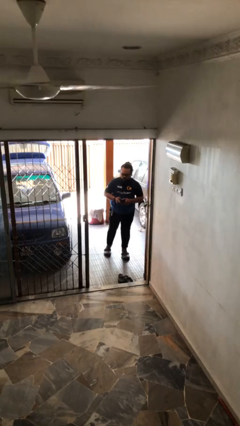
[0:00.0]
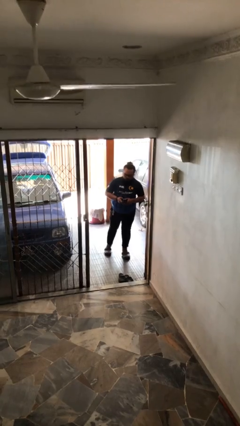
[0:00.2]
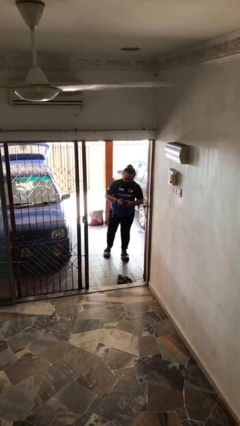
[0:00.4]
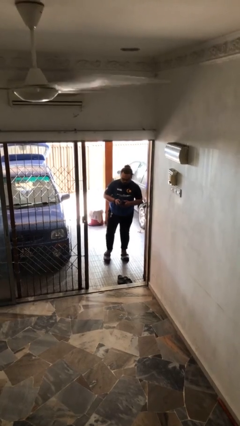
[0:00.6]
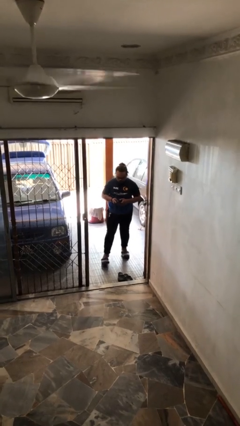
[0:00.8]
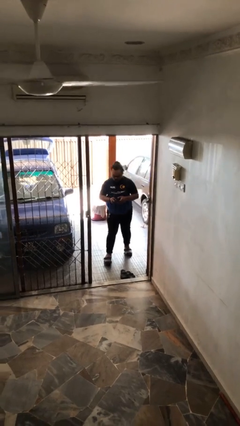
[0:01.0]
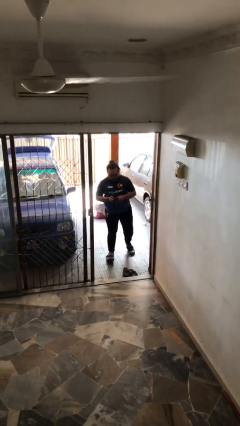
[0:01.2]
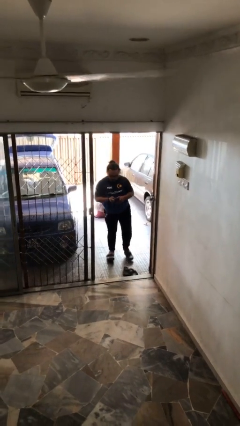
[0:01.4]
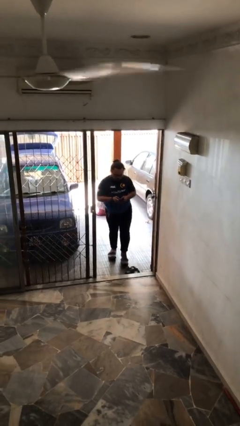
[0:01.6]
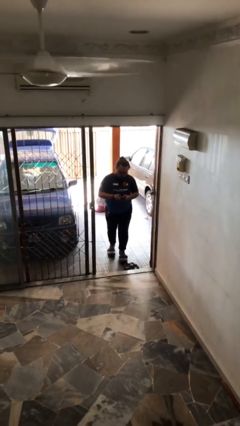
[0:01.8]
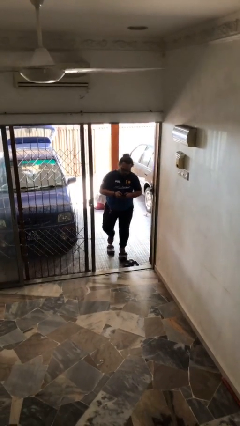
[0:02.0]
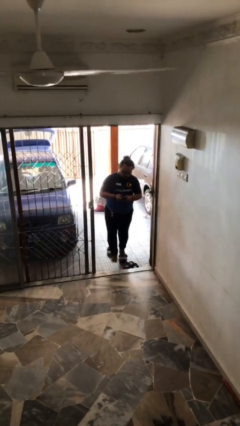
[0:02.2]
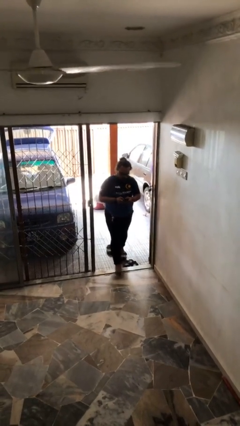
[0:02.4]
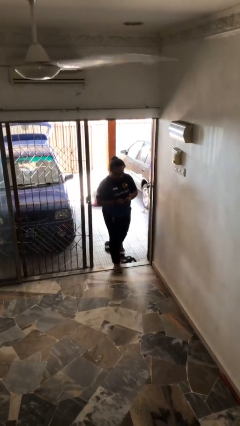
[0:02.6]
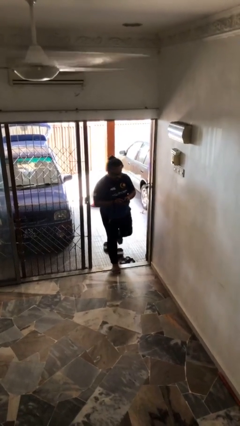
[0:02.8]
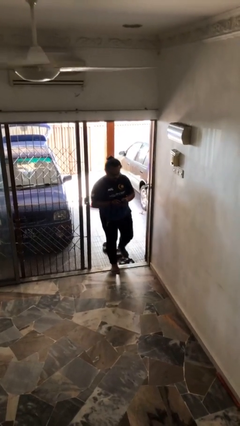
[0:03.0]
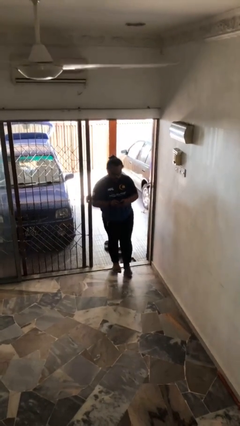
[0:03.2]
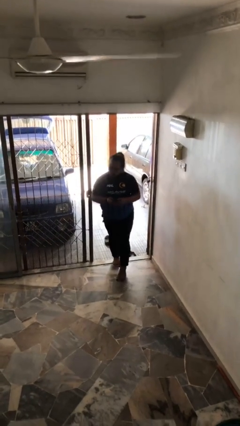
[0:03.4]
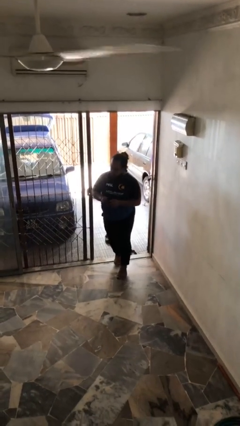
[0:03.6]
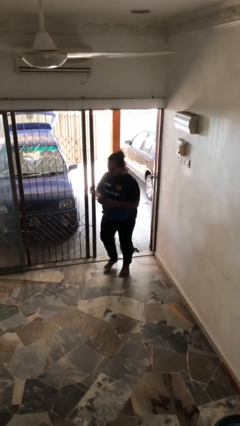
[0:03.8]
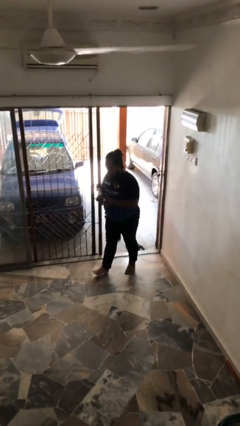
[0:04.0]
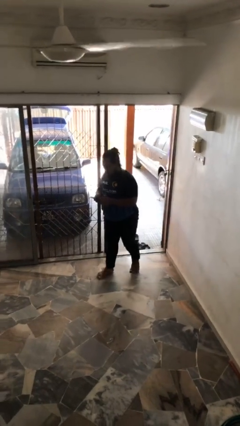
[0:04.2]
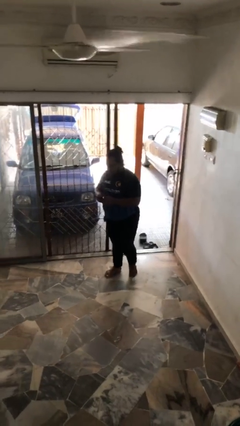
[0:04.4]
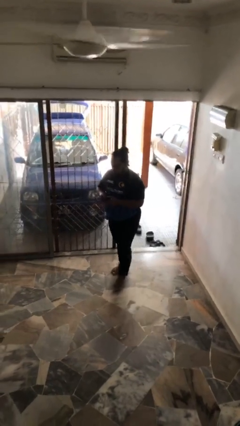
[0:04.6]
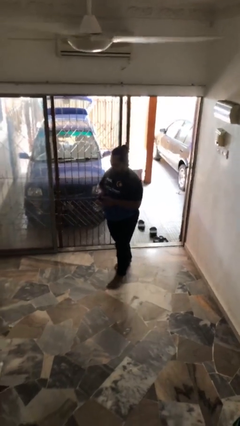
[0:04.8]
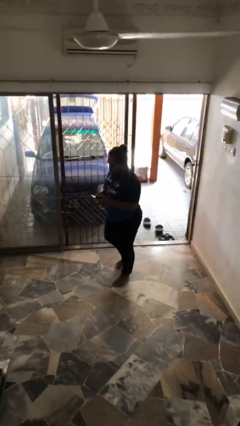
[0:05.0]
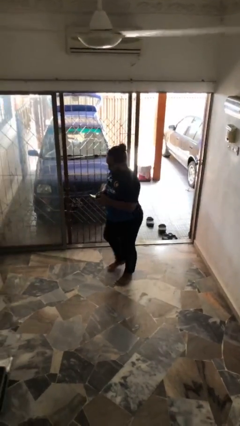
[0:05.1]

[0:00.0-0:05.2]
person texts on phone

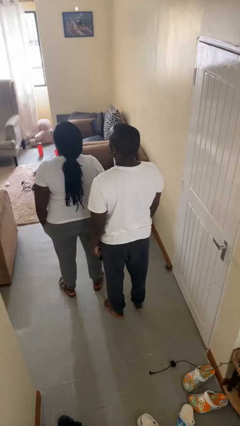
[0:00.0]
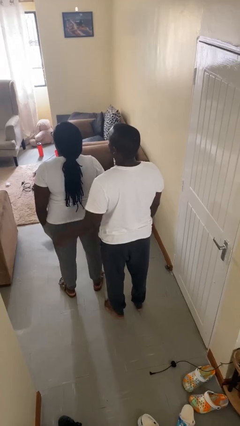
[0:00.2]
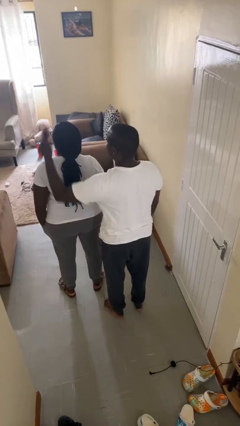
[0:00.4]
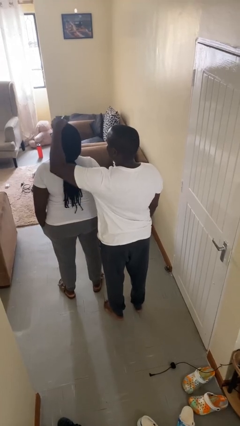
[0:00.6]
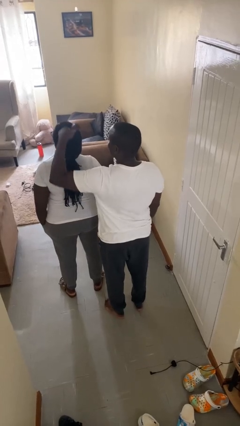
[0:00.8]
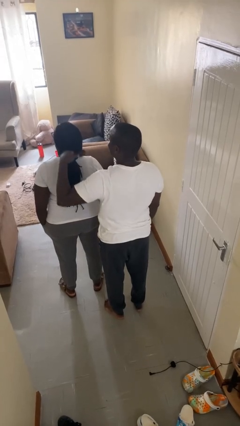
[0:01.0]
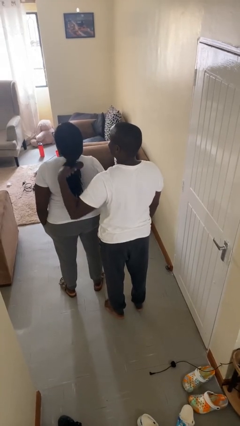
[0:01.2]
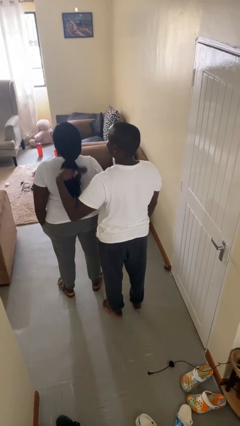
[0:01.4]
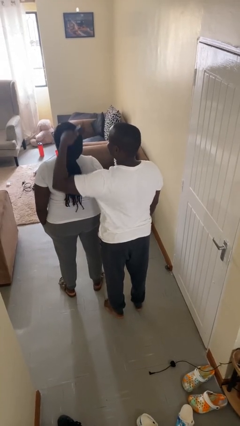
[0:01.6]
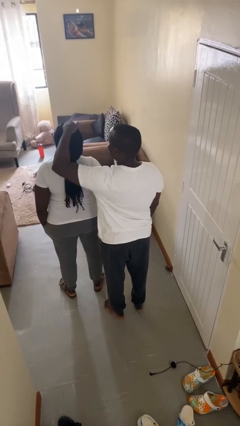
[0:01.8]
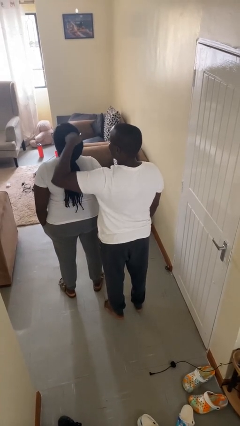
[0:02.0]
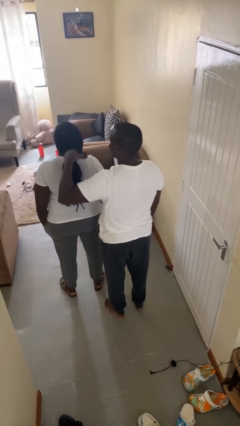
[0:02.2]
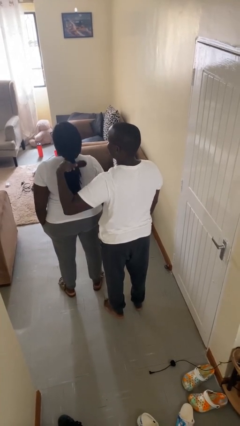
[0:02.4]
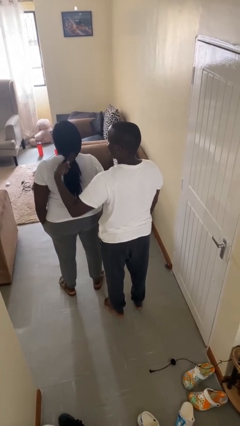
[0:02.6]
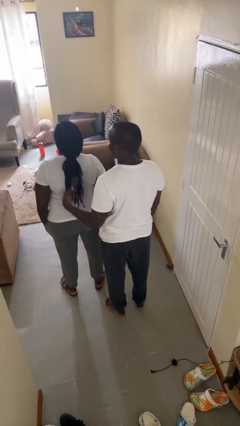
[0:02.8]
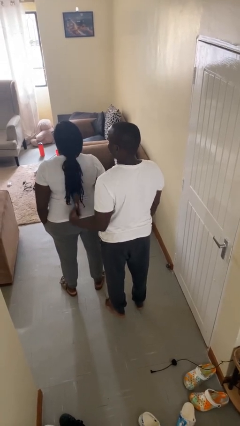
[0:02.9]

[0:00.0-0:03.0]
person brushes hair of person

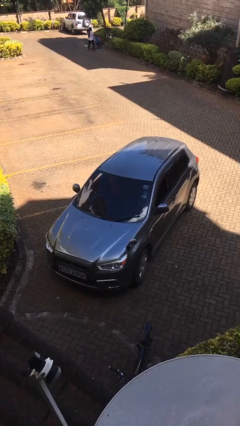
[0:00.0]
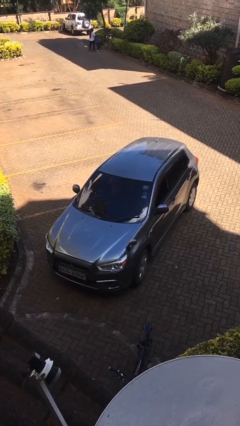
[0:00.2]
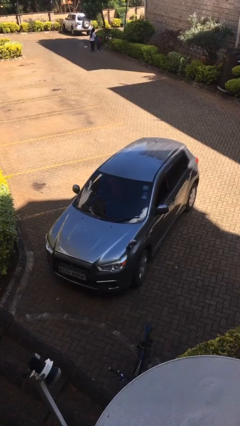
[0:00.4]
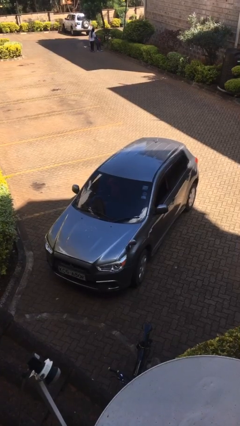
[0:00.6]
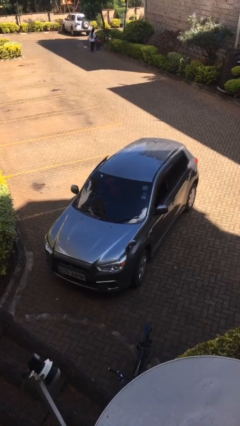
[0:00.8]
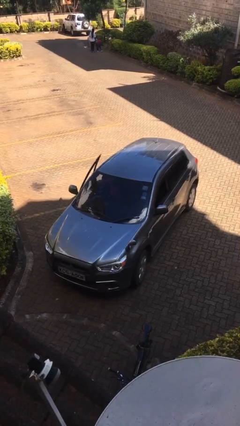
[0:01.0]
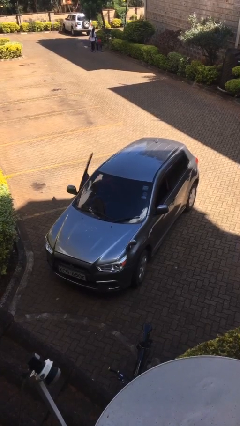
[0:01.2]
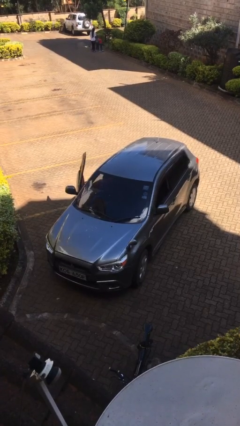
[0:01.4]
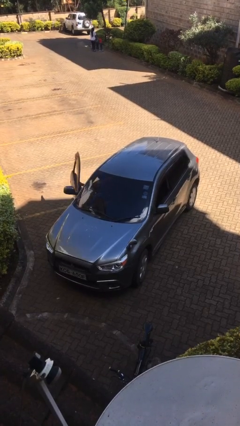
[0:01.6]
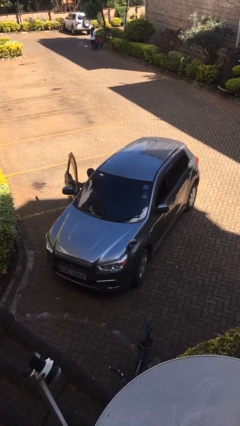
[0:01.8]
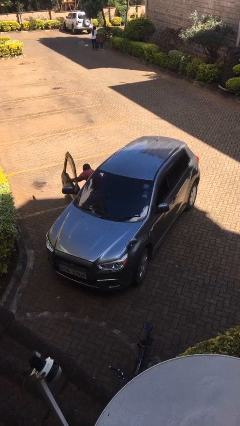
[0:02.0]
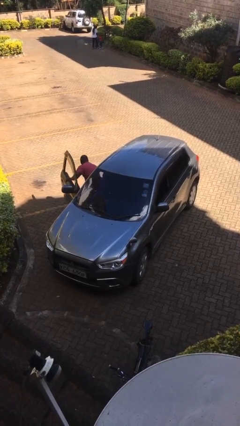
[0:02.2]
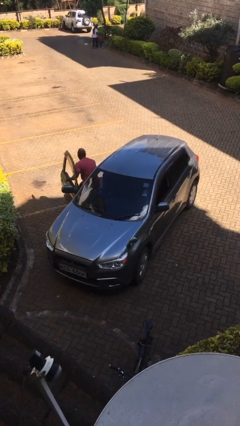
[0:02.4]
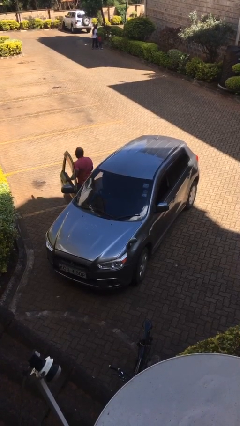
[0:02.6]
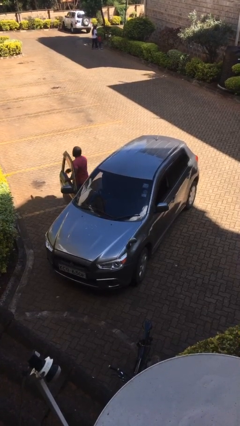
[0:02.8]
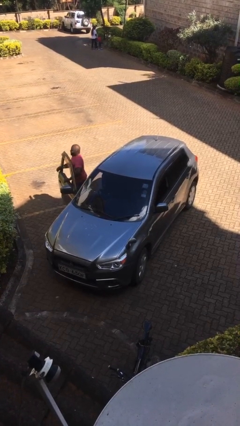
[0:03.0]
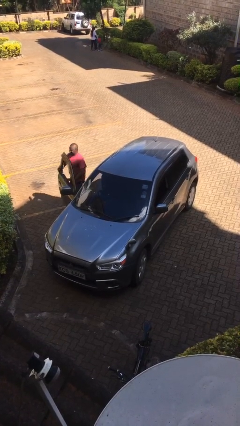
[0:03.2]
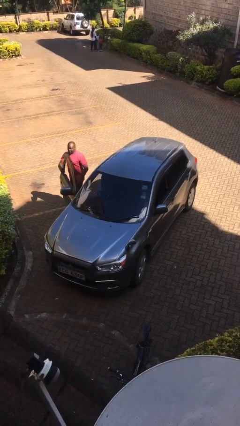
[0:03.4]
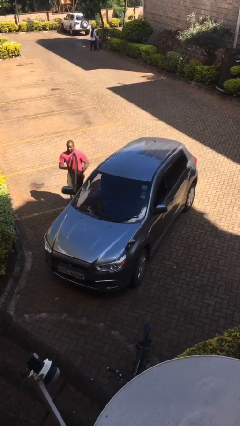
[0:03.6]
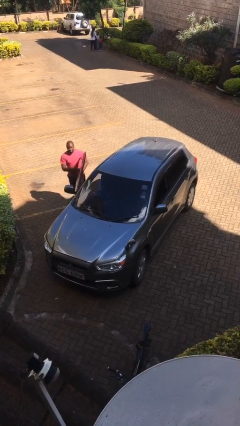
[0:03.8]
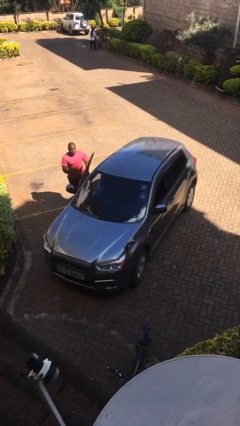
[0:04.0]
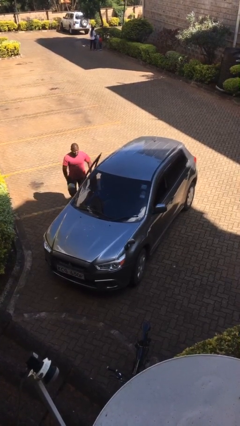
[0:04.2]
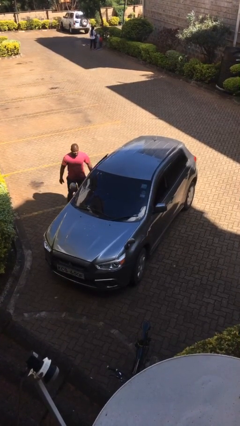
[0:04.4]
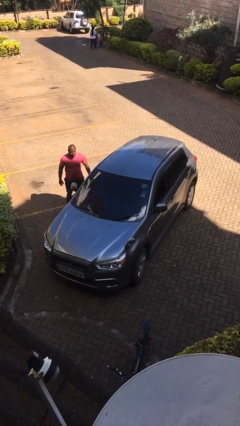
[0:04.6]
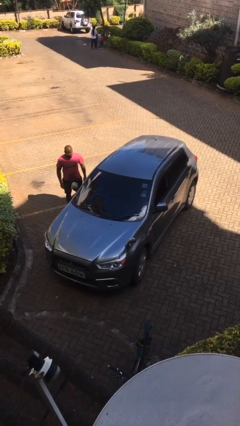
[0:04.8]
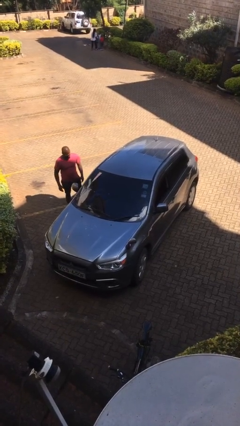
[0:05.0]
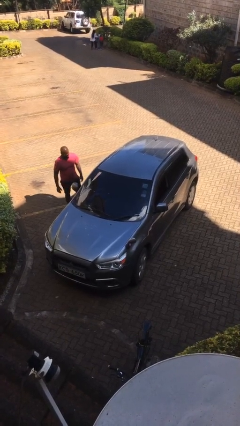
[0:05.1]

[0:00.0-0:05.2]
car drops off person

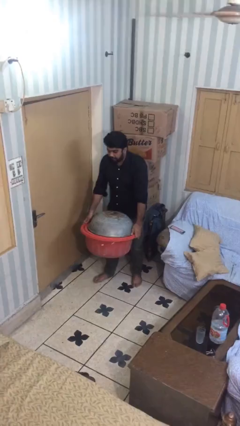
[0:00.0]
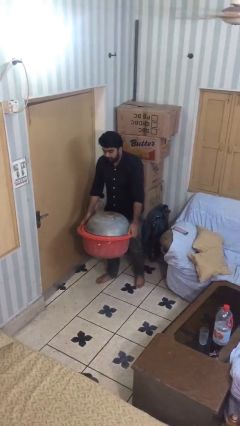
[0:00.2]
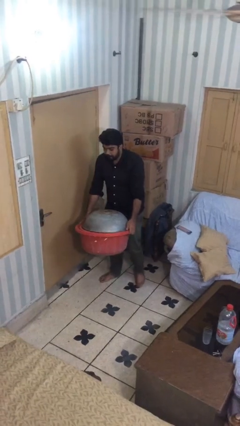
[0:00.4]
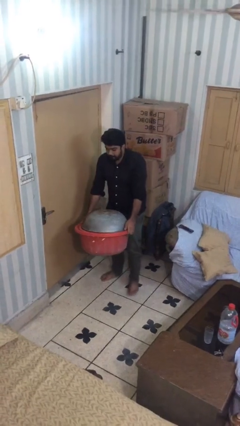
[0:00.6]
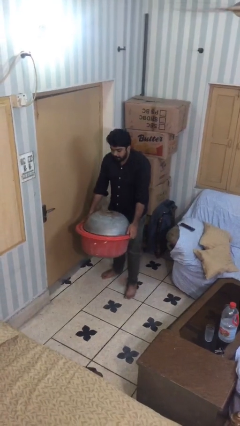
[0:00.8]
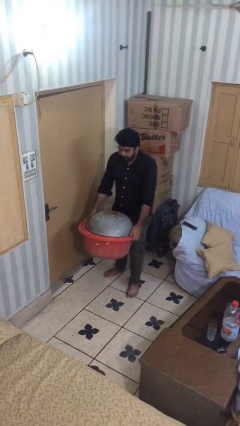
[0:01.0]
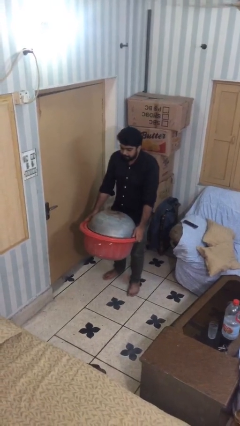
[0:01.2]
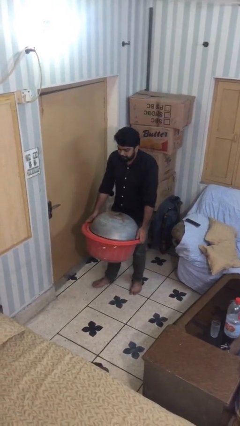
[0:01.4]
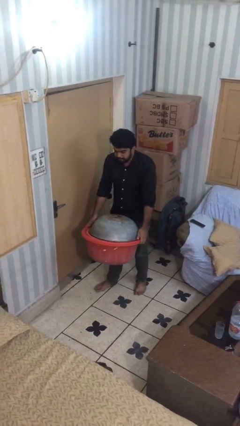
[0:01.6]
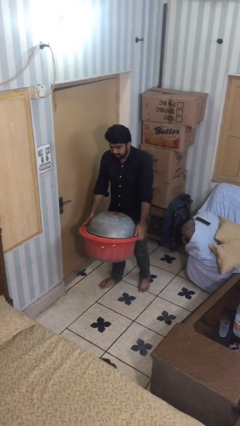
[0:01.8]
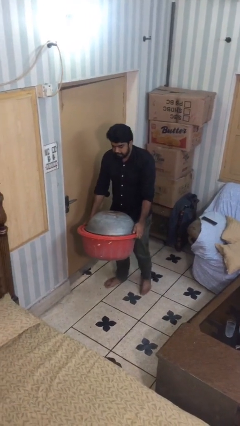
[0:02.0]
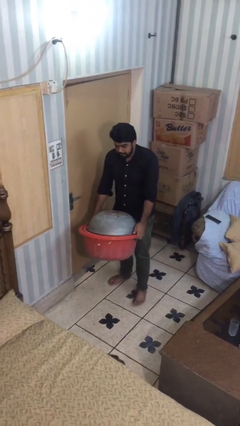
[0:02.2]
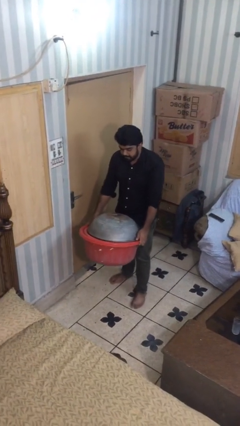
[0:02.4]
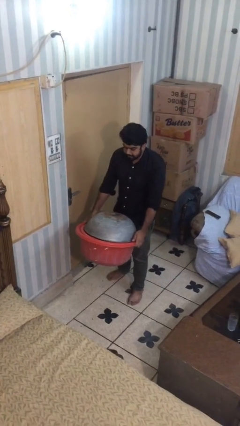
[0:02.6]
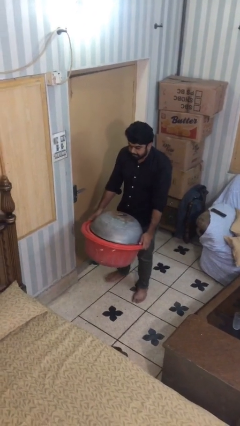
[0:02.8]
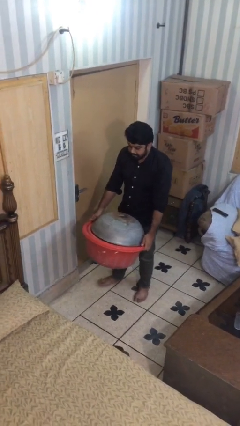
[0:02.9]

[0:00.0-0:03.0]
person carries heavy object

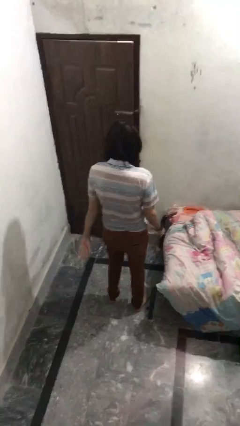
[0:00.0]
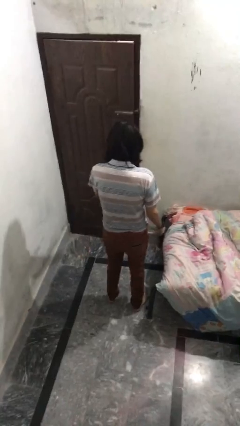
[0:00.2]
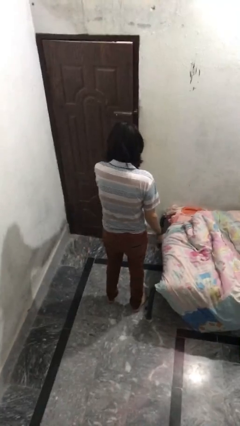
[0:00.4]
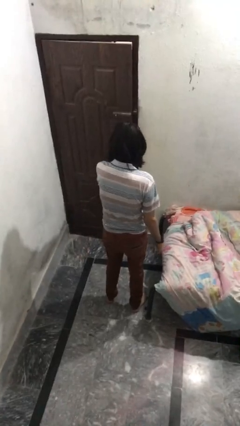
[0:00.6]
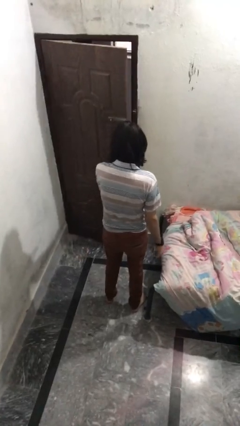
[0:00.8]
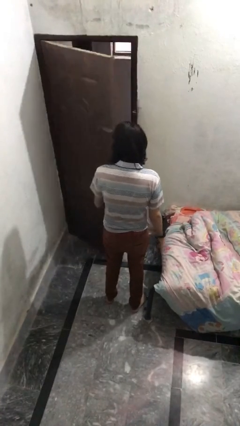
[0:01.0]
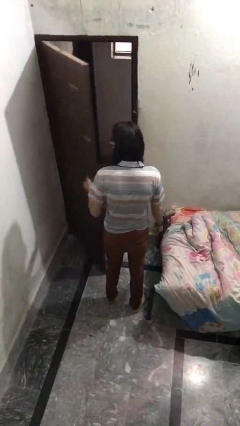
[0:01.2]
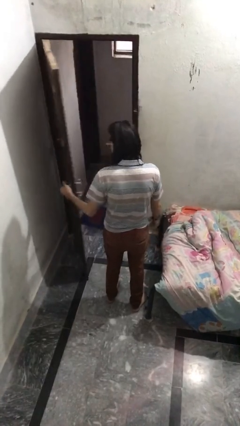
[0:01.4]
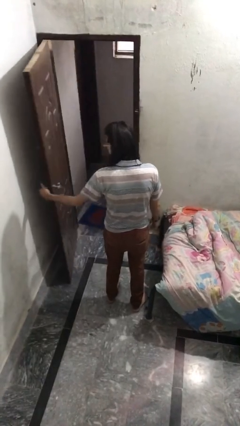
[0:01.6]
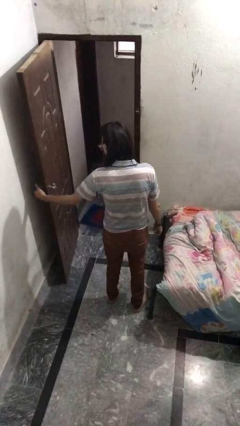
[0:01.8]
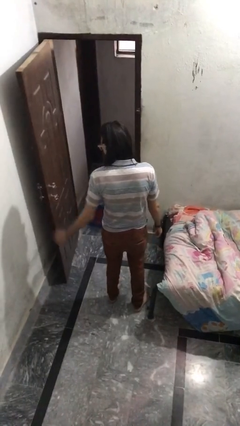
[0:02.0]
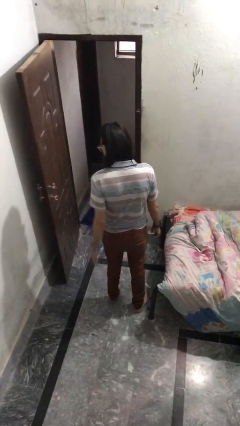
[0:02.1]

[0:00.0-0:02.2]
person opens facility door
